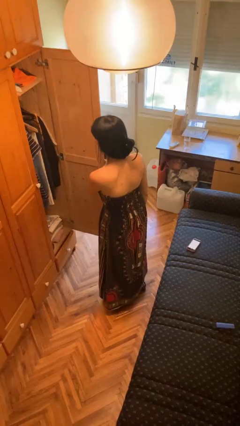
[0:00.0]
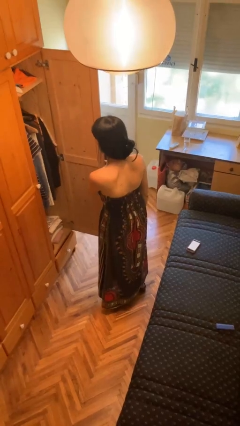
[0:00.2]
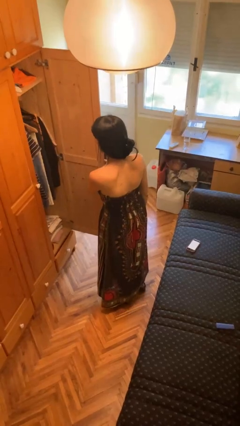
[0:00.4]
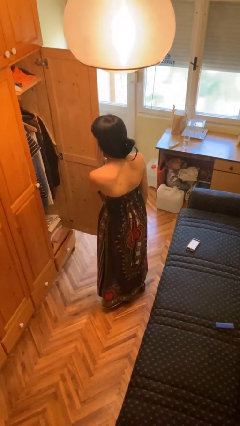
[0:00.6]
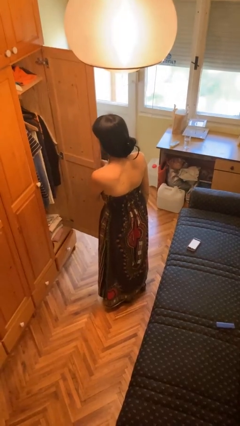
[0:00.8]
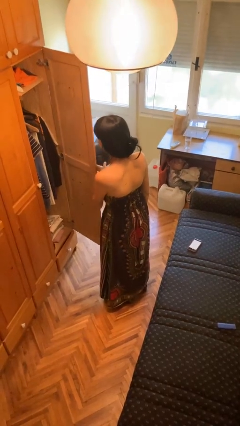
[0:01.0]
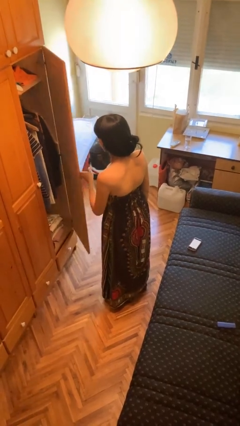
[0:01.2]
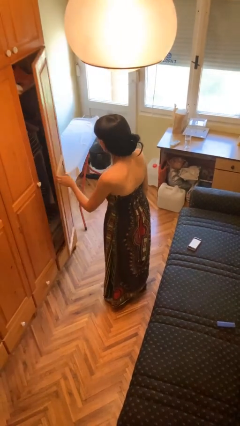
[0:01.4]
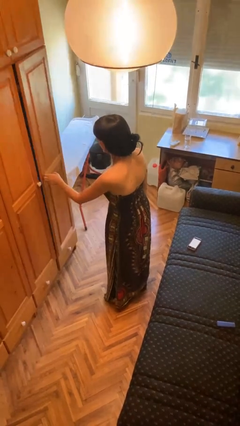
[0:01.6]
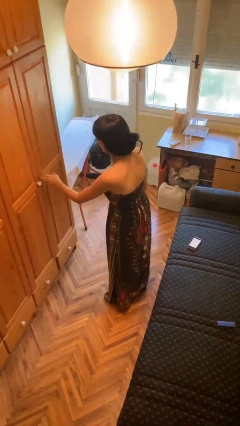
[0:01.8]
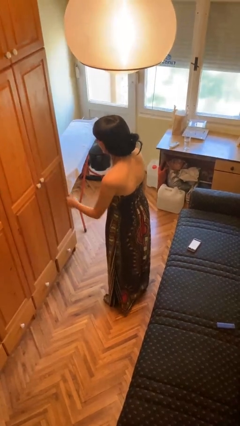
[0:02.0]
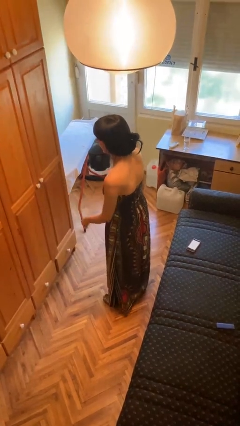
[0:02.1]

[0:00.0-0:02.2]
person closes closet door

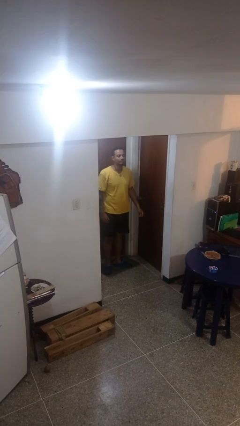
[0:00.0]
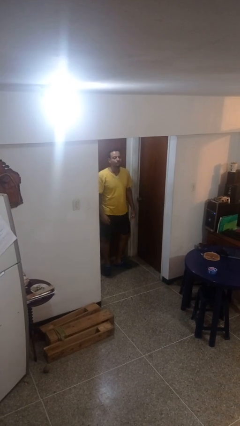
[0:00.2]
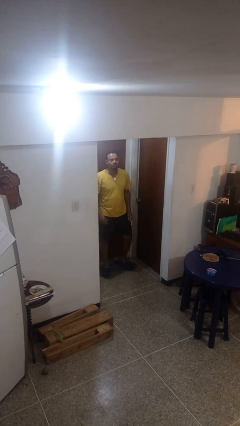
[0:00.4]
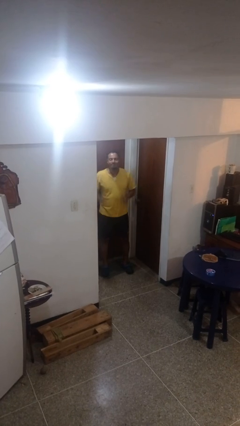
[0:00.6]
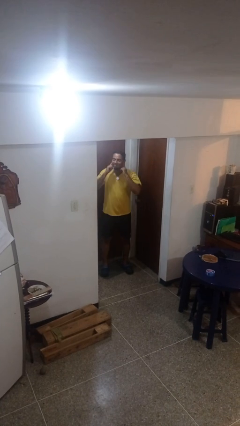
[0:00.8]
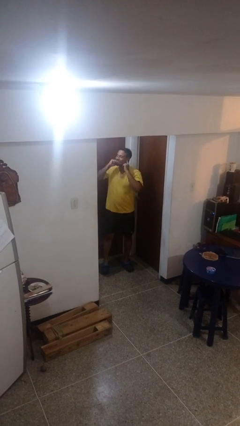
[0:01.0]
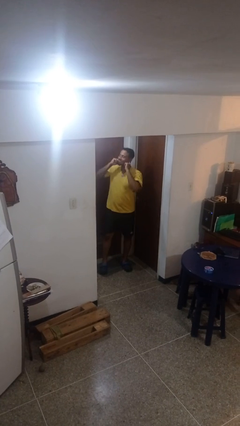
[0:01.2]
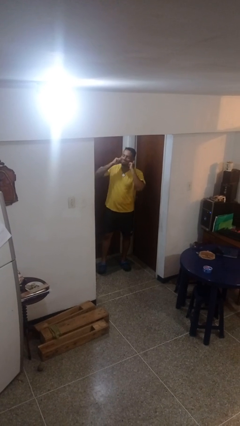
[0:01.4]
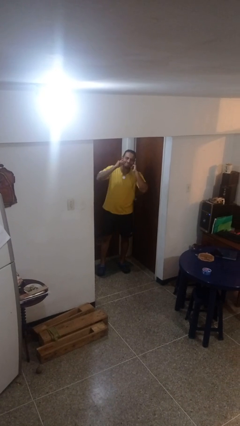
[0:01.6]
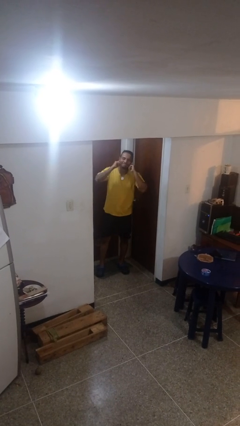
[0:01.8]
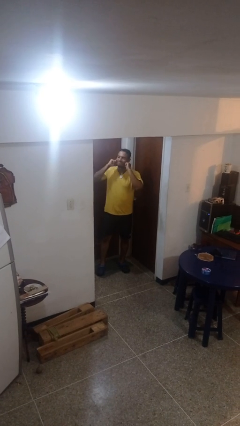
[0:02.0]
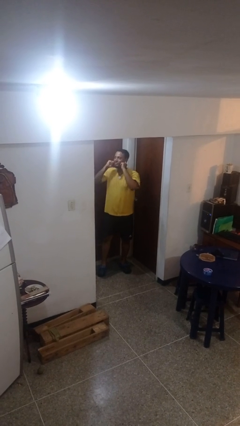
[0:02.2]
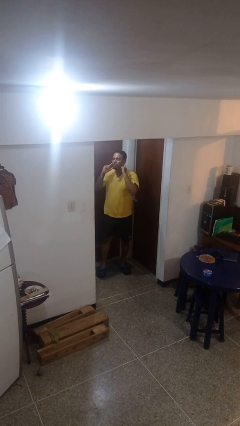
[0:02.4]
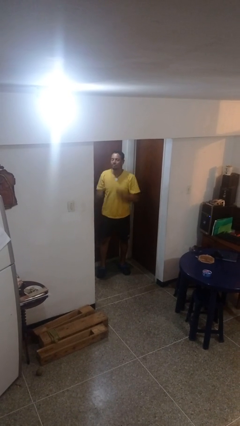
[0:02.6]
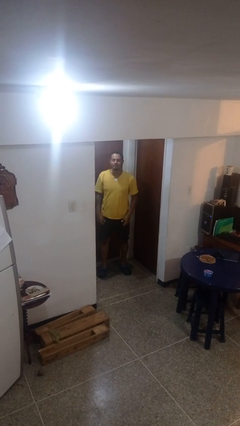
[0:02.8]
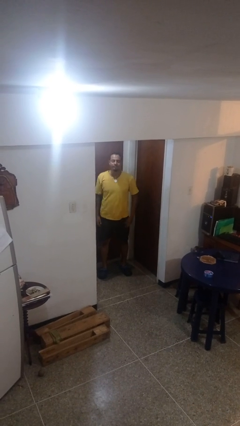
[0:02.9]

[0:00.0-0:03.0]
person puts fingers in ear

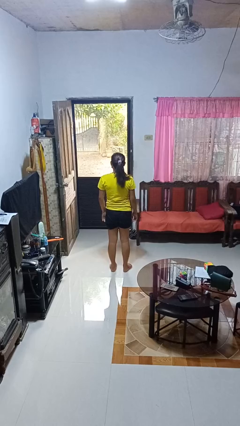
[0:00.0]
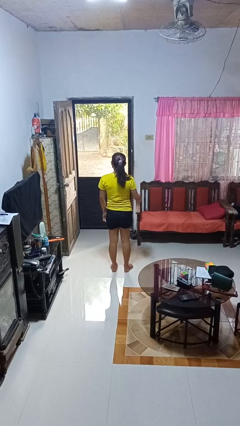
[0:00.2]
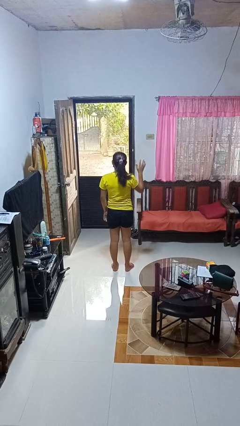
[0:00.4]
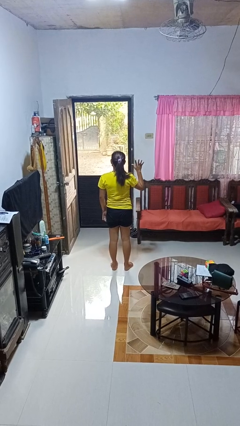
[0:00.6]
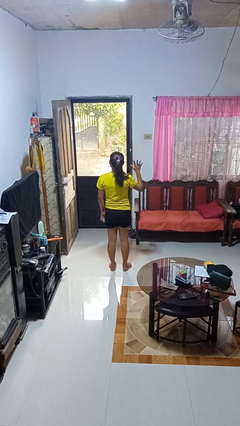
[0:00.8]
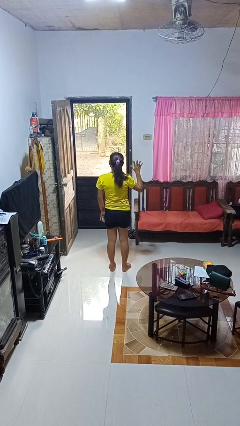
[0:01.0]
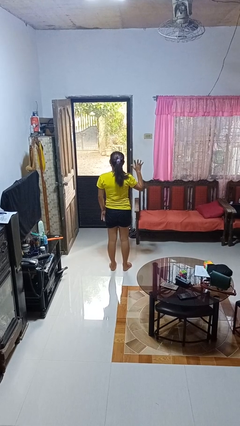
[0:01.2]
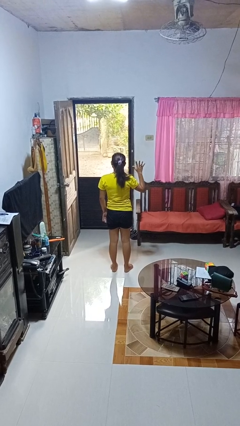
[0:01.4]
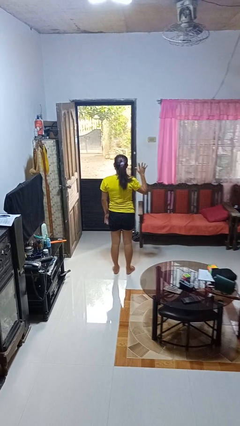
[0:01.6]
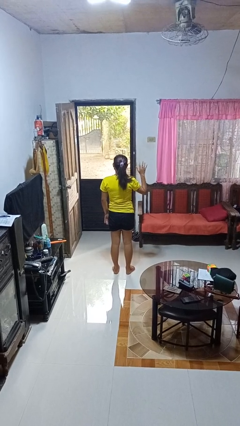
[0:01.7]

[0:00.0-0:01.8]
person gestures number five

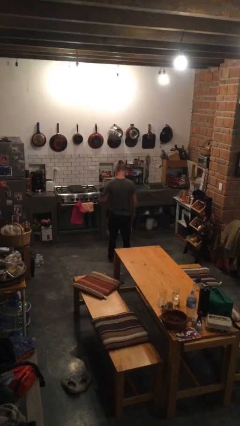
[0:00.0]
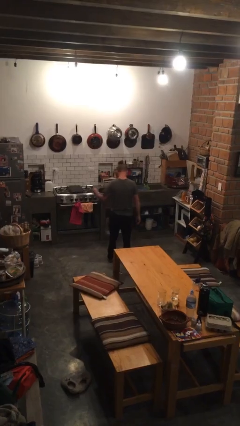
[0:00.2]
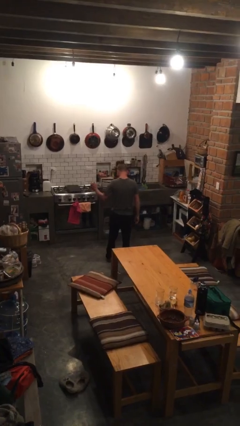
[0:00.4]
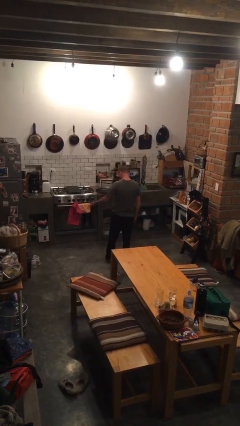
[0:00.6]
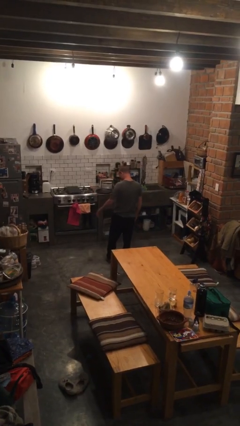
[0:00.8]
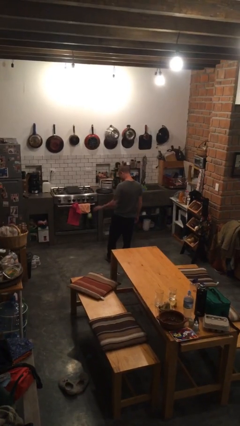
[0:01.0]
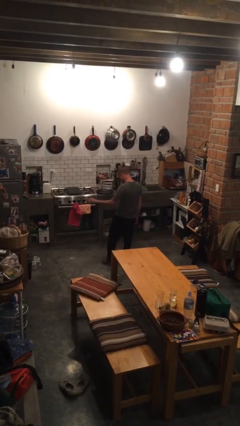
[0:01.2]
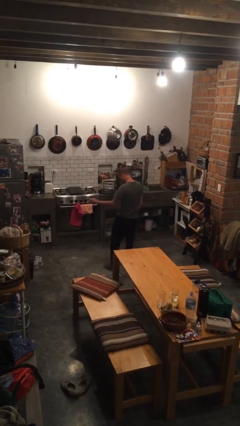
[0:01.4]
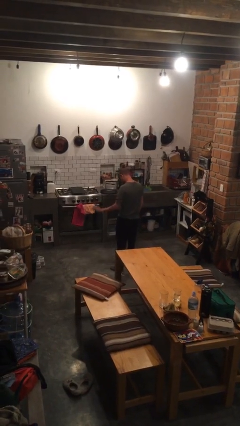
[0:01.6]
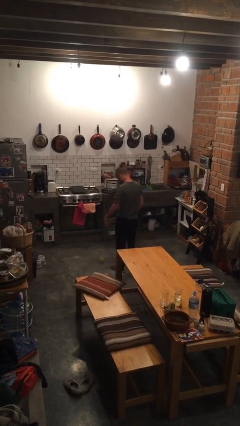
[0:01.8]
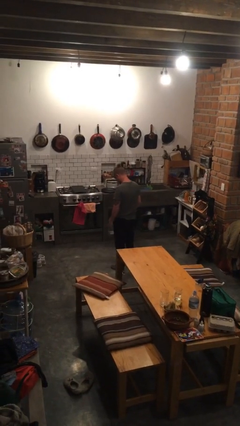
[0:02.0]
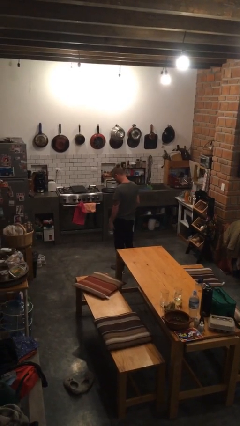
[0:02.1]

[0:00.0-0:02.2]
person bounces ball on floor

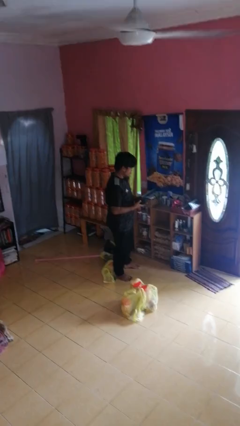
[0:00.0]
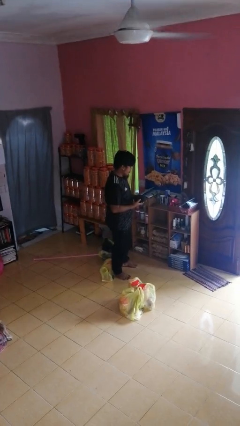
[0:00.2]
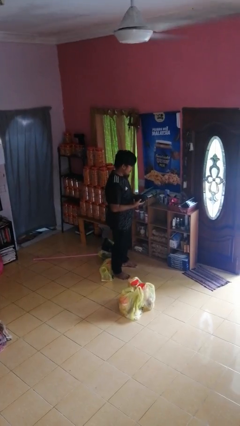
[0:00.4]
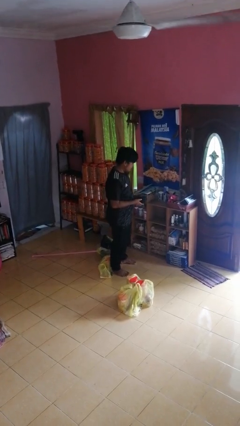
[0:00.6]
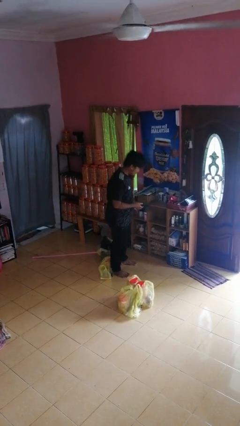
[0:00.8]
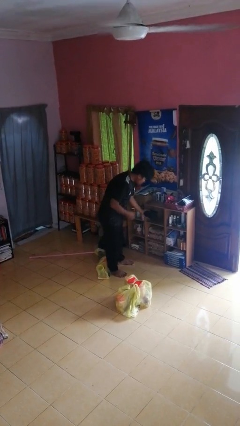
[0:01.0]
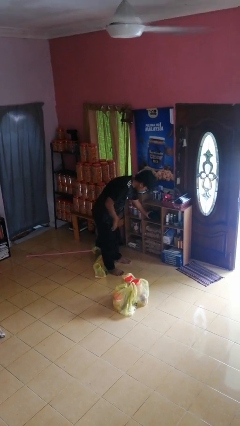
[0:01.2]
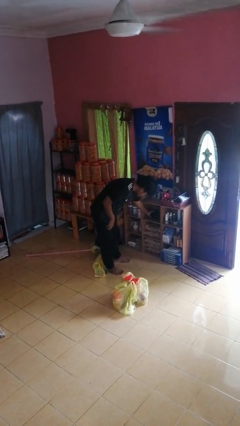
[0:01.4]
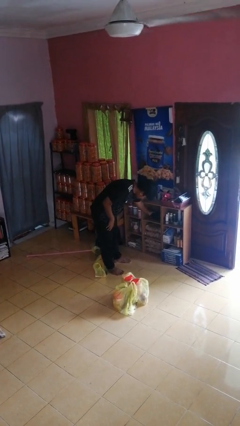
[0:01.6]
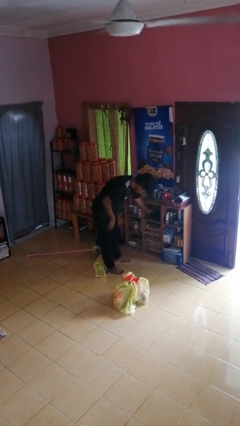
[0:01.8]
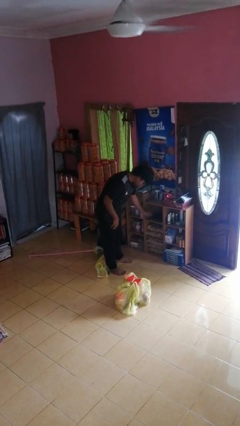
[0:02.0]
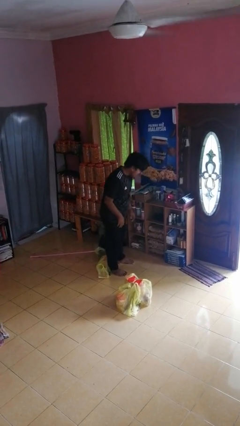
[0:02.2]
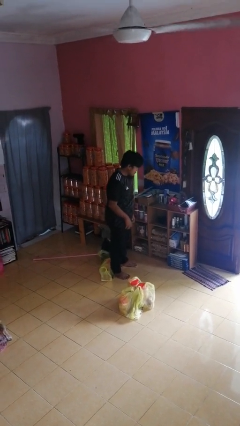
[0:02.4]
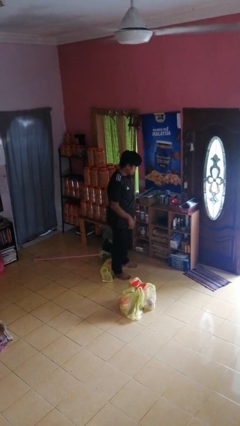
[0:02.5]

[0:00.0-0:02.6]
person puts object in cabinet

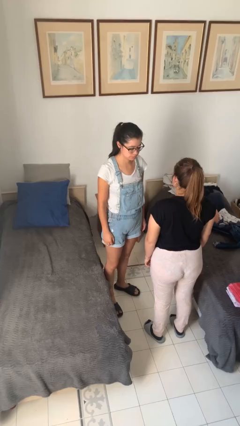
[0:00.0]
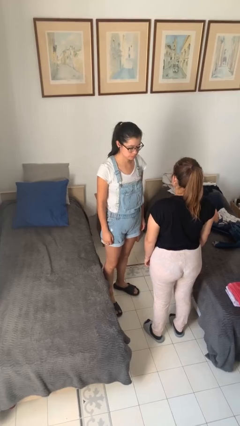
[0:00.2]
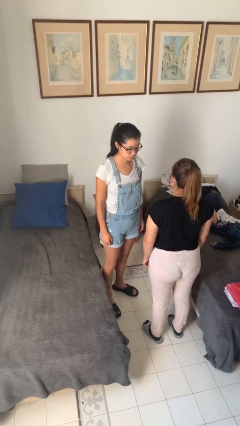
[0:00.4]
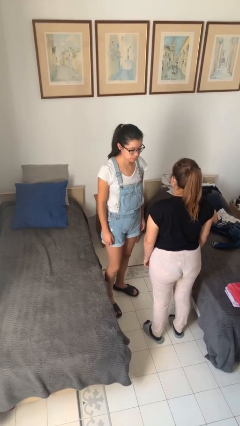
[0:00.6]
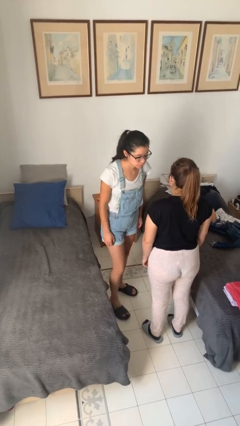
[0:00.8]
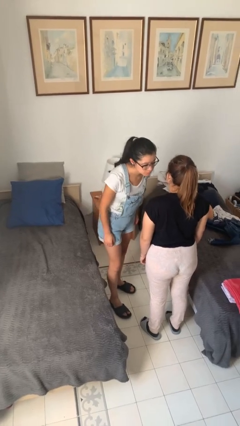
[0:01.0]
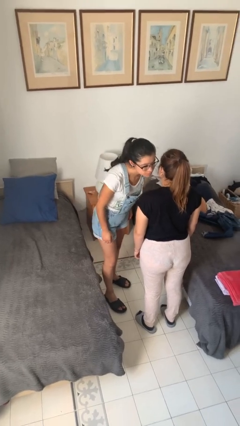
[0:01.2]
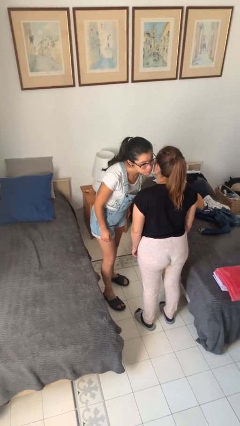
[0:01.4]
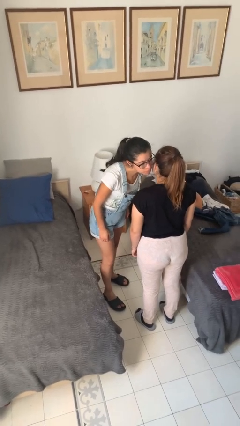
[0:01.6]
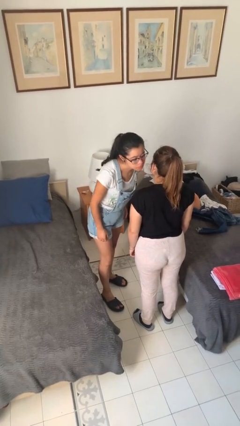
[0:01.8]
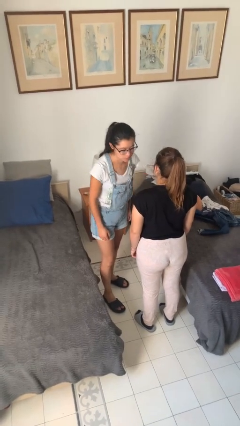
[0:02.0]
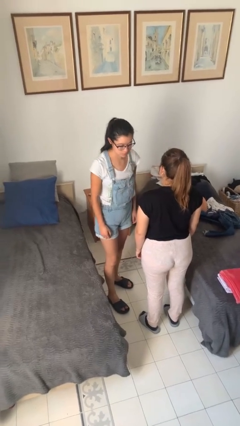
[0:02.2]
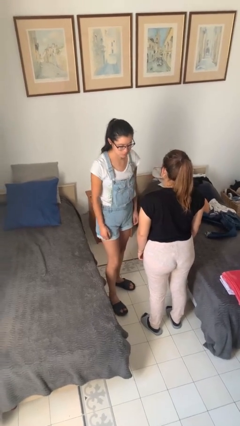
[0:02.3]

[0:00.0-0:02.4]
person kisses cheek of person

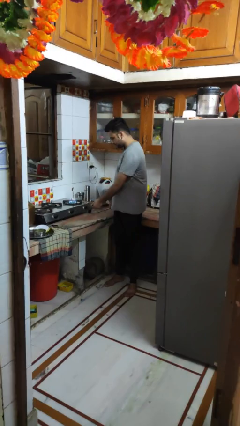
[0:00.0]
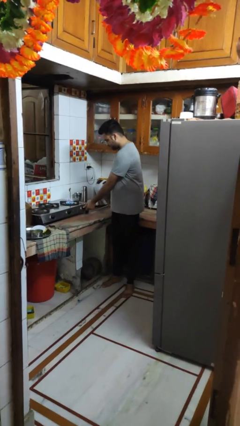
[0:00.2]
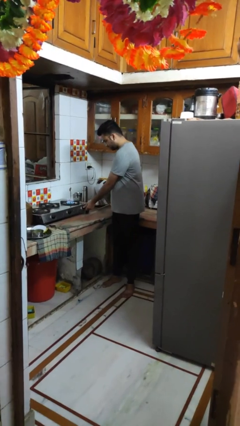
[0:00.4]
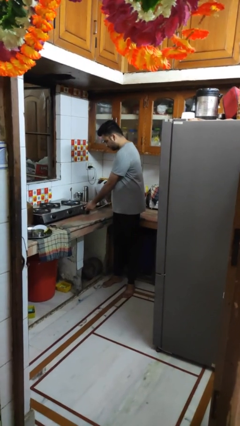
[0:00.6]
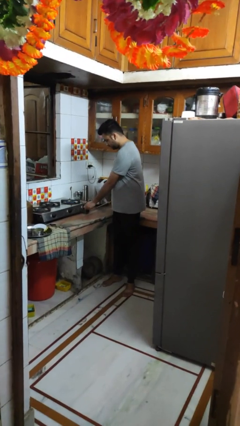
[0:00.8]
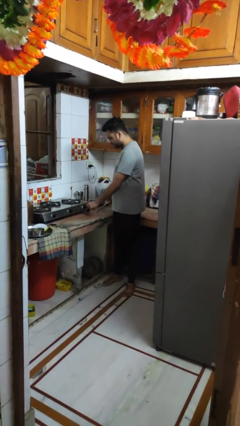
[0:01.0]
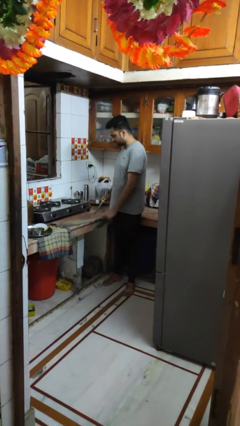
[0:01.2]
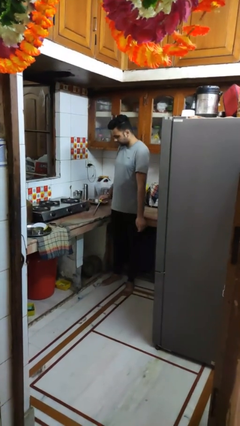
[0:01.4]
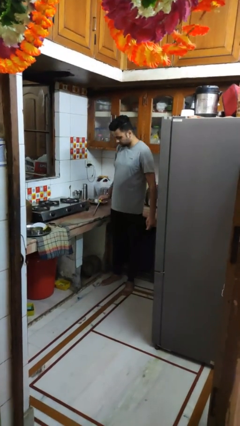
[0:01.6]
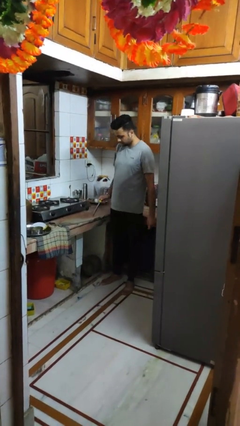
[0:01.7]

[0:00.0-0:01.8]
person turns off stovetop

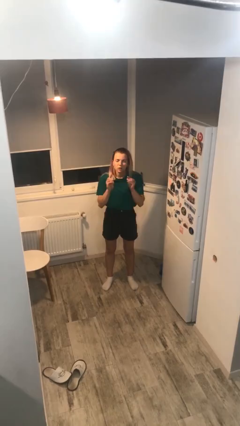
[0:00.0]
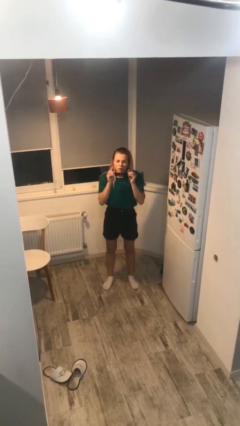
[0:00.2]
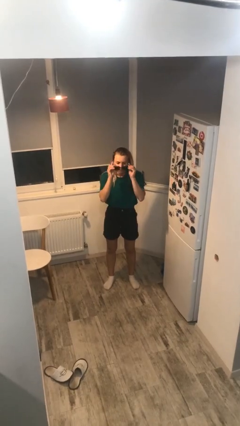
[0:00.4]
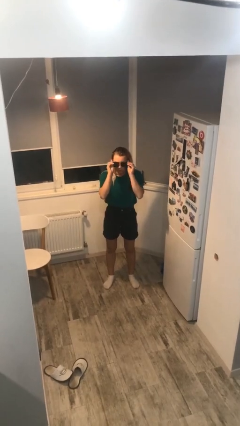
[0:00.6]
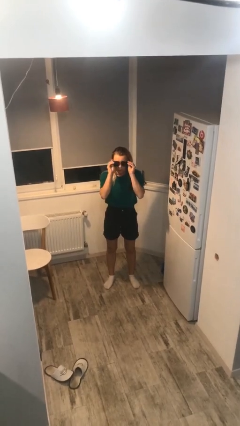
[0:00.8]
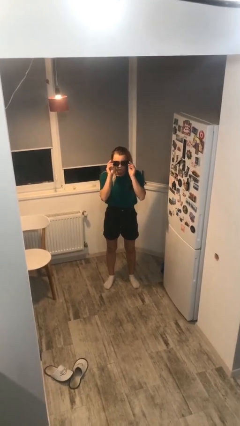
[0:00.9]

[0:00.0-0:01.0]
person puts on glasses
